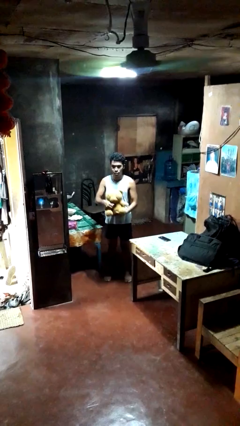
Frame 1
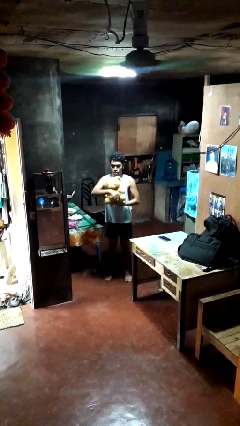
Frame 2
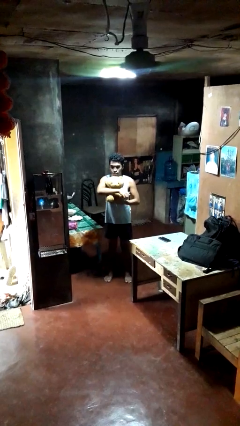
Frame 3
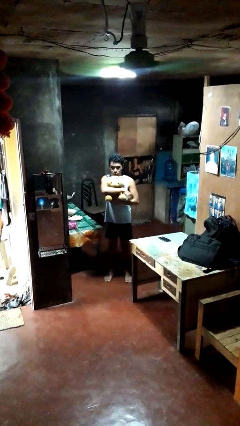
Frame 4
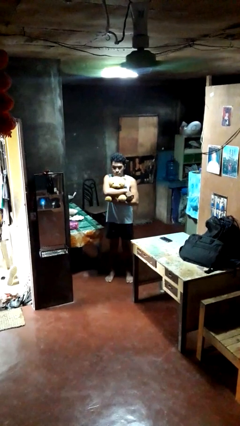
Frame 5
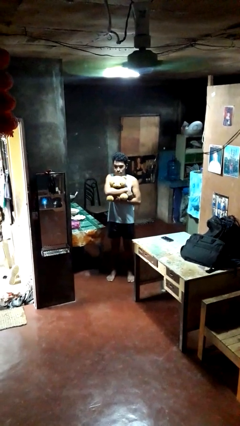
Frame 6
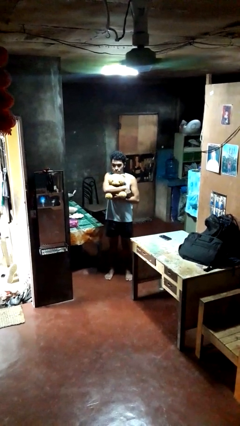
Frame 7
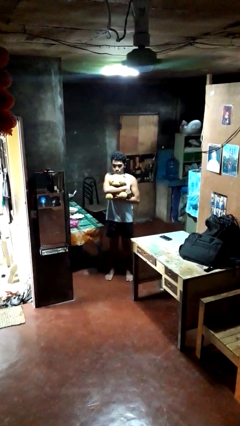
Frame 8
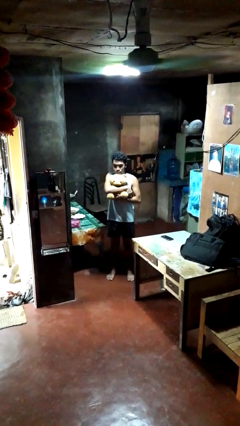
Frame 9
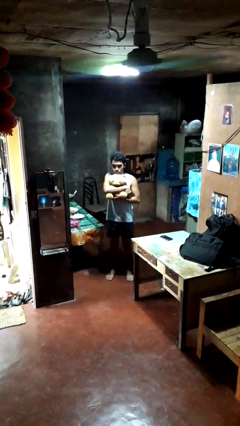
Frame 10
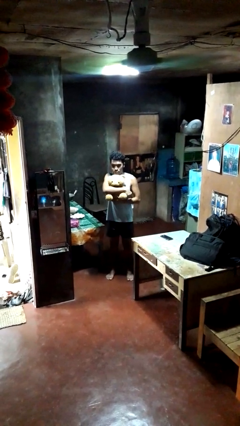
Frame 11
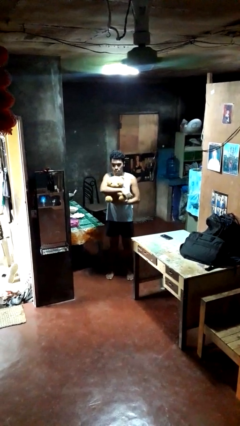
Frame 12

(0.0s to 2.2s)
person hugs stuffed animal

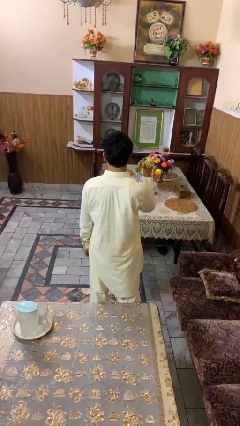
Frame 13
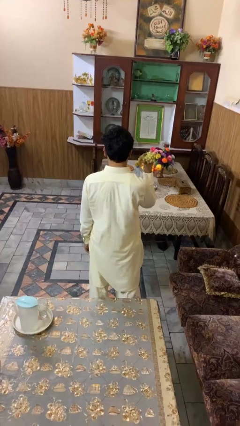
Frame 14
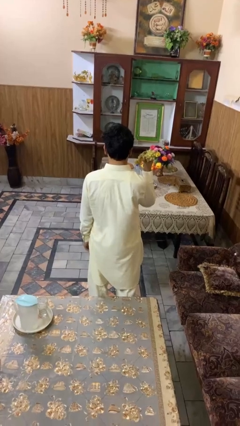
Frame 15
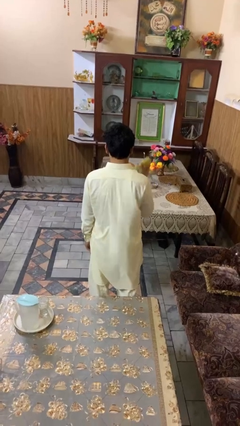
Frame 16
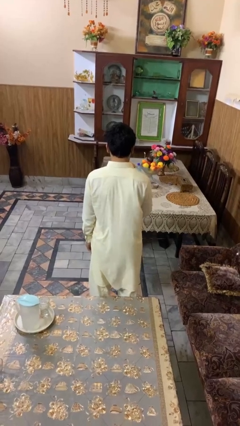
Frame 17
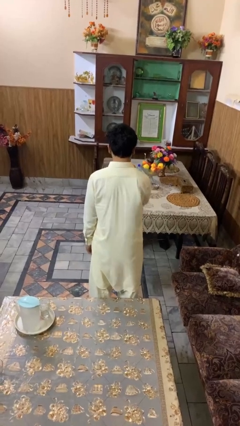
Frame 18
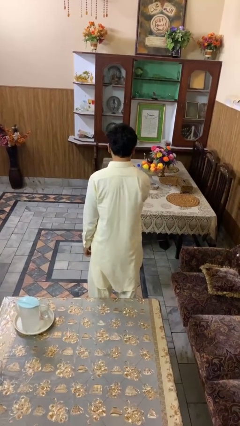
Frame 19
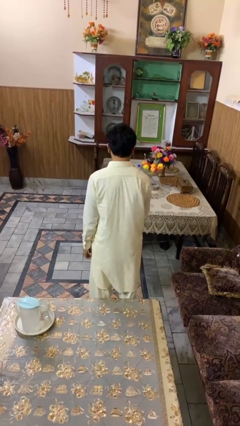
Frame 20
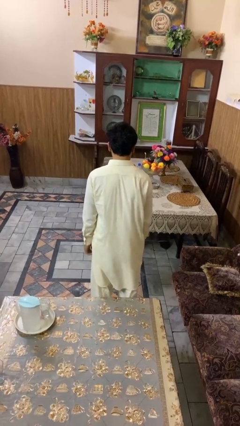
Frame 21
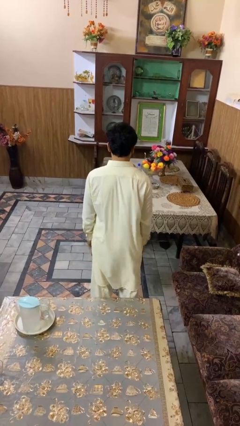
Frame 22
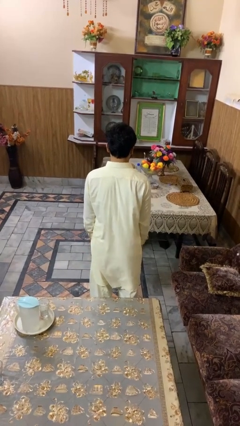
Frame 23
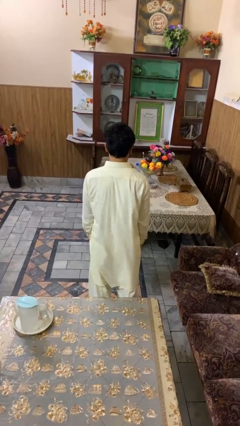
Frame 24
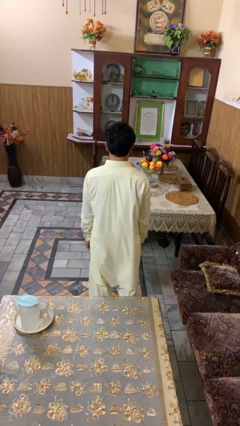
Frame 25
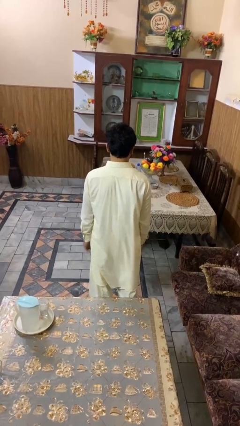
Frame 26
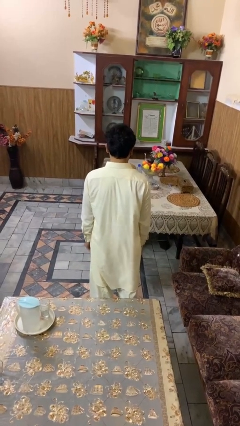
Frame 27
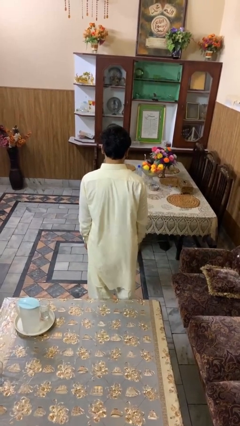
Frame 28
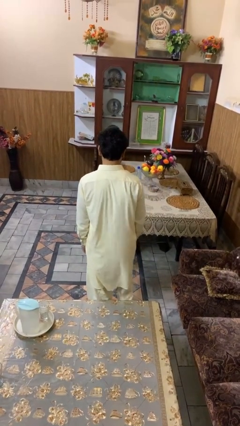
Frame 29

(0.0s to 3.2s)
person throws object on table

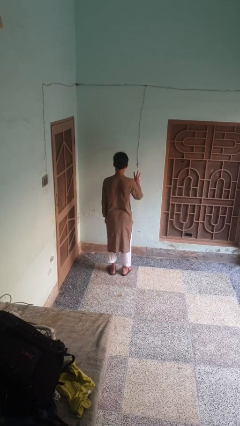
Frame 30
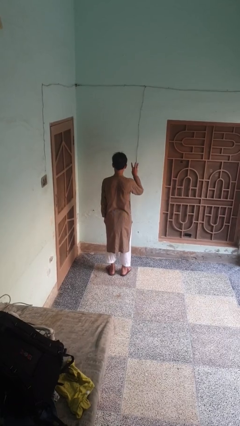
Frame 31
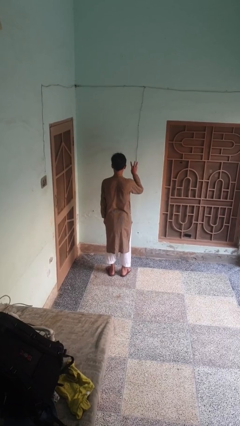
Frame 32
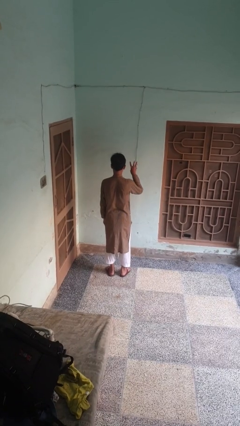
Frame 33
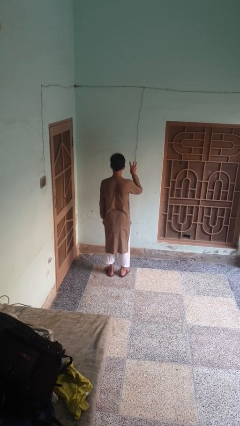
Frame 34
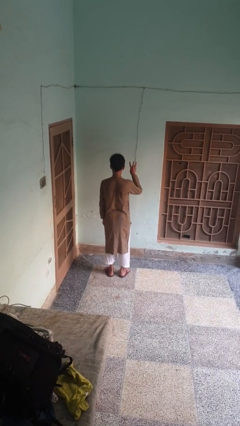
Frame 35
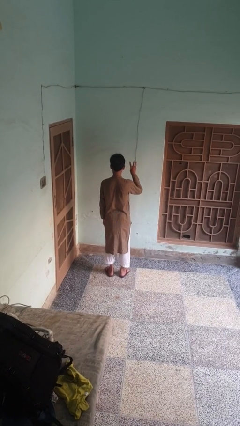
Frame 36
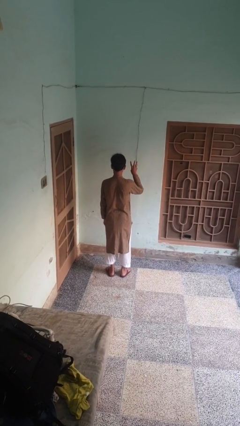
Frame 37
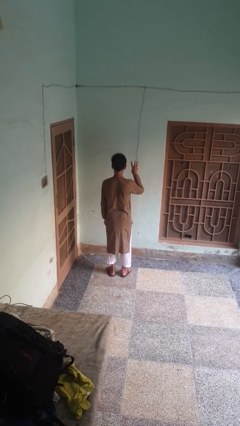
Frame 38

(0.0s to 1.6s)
person gestures number three

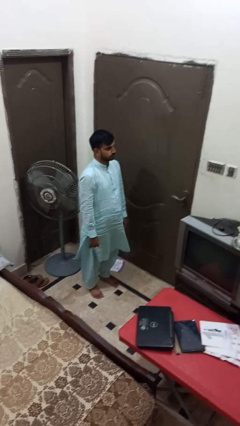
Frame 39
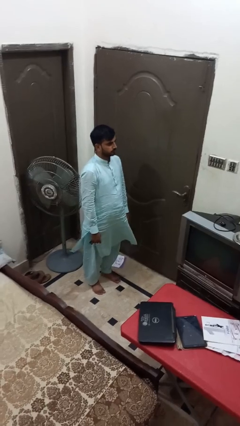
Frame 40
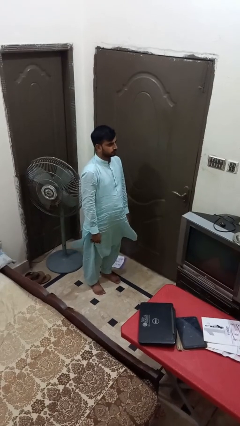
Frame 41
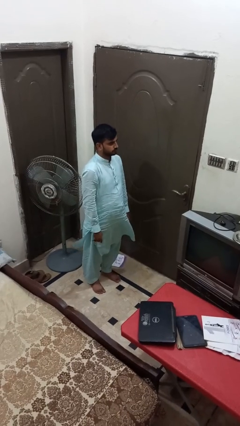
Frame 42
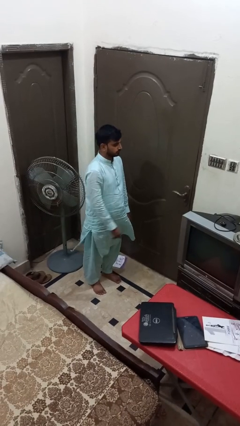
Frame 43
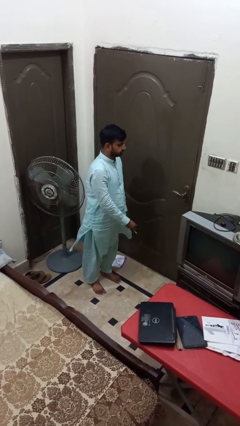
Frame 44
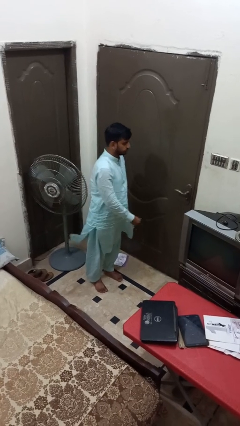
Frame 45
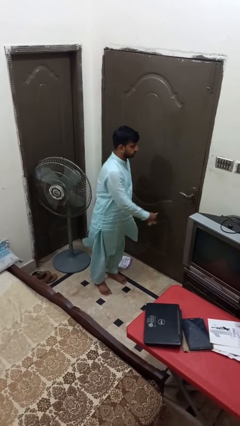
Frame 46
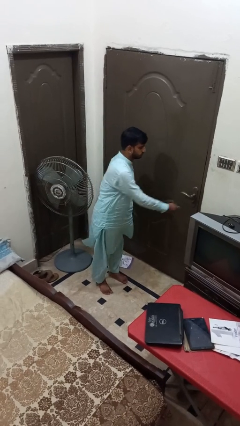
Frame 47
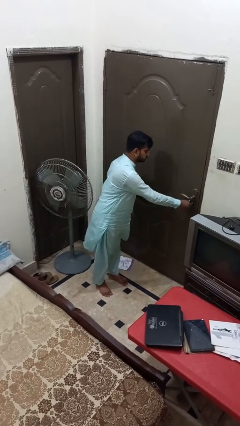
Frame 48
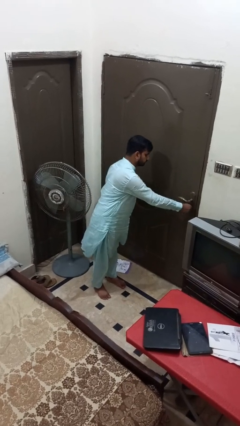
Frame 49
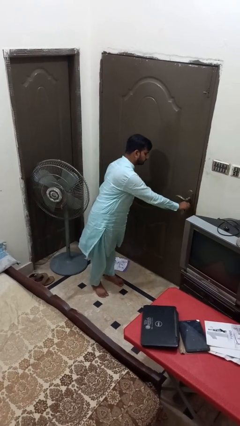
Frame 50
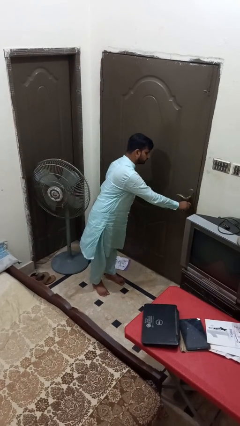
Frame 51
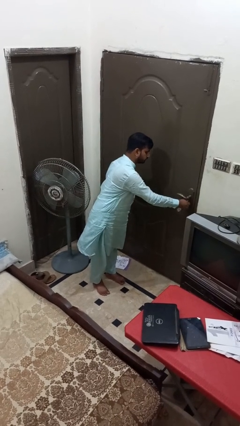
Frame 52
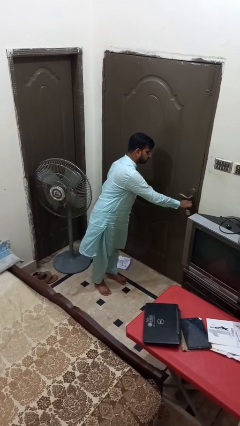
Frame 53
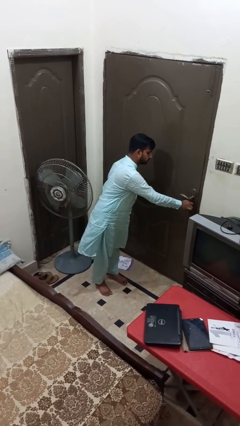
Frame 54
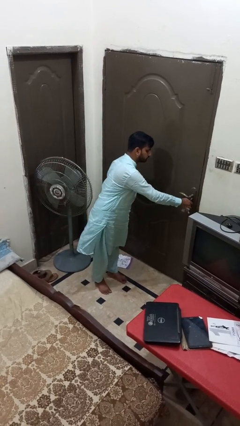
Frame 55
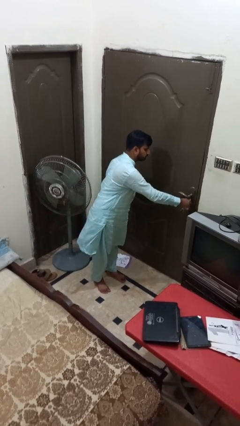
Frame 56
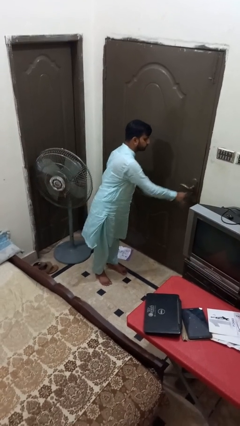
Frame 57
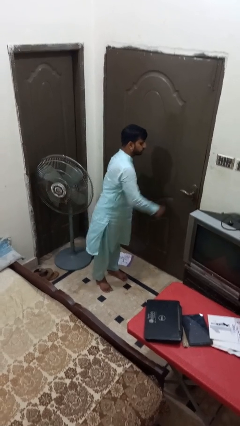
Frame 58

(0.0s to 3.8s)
person unlocks door with keys

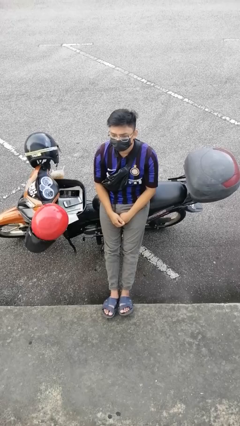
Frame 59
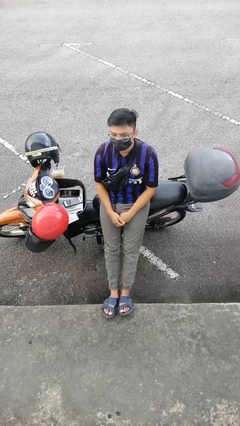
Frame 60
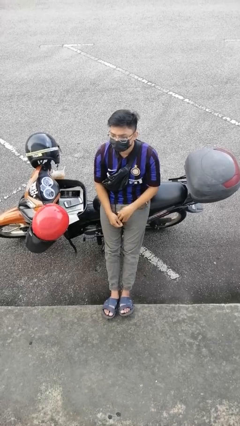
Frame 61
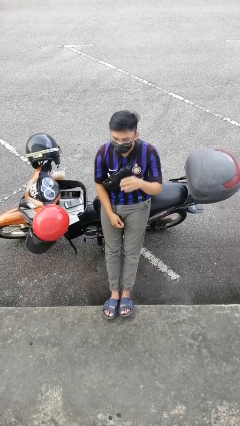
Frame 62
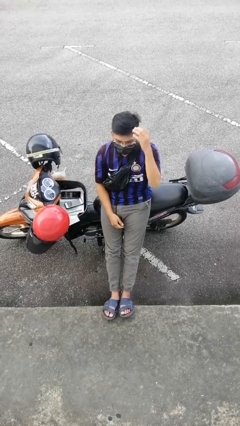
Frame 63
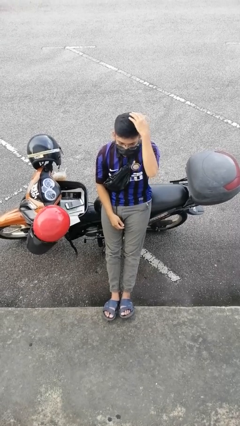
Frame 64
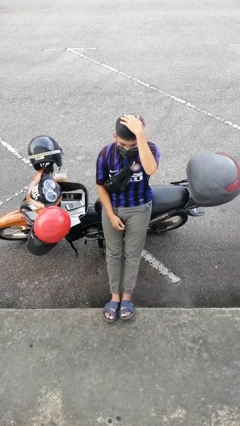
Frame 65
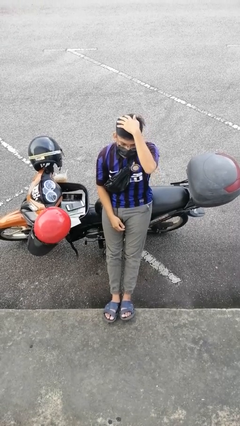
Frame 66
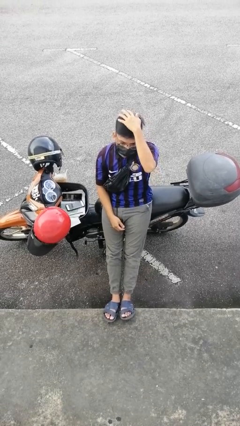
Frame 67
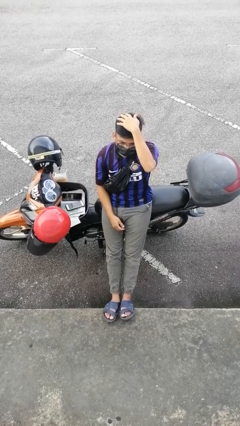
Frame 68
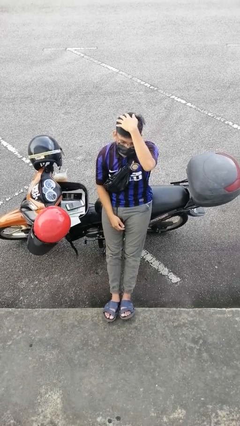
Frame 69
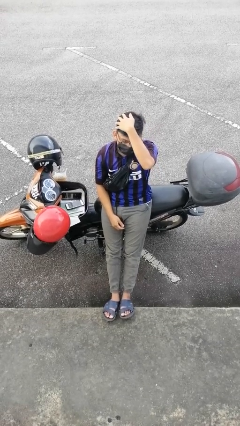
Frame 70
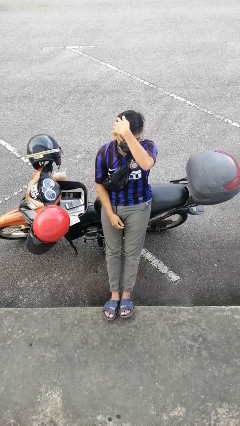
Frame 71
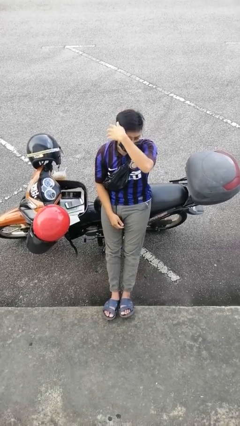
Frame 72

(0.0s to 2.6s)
person pats head

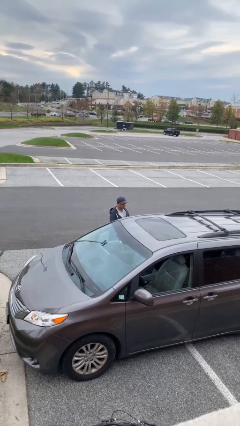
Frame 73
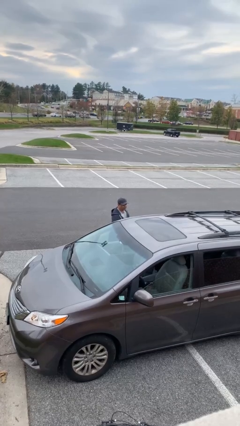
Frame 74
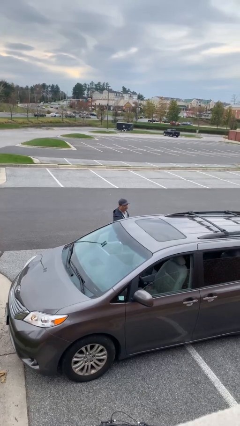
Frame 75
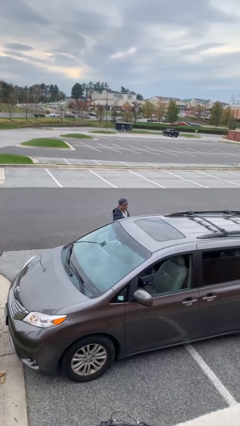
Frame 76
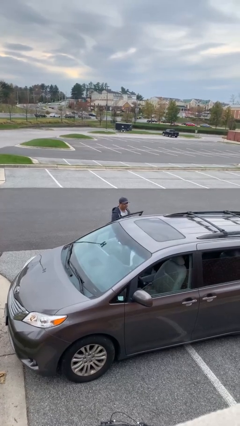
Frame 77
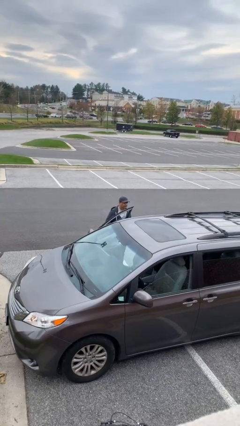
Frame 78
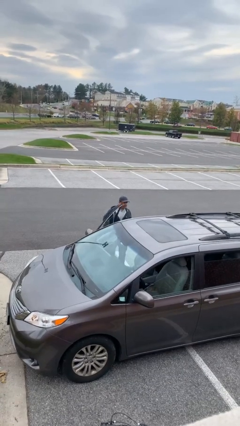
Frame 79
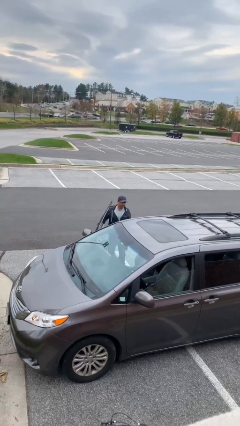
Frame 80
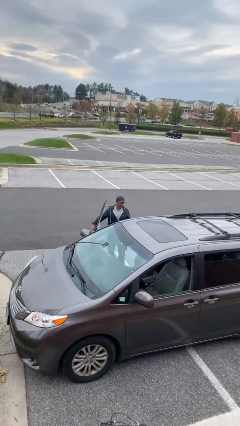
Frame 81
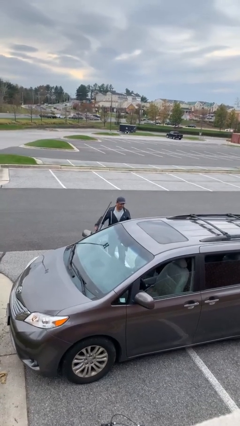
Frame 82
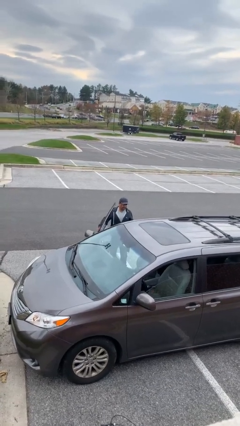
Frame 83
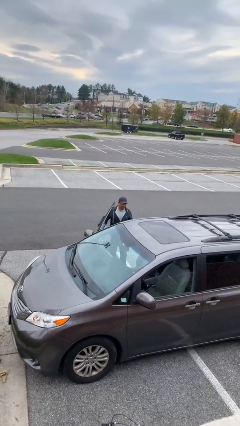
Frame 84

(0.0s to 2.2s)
person opens car door

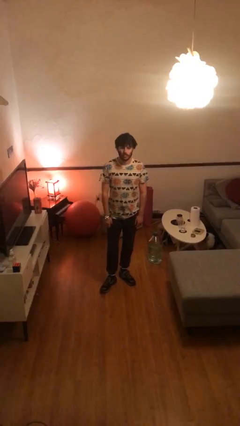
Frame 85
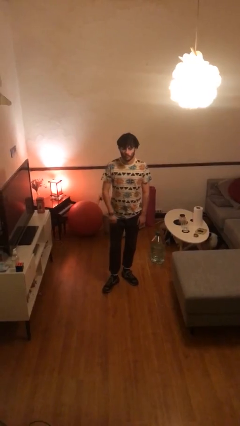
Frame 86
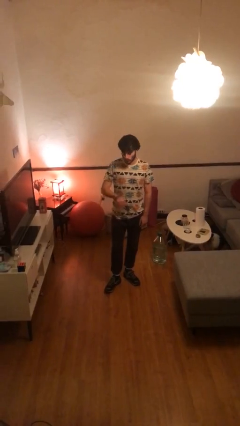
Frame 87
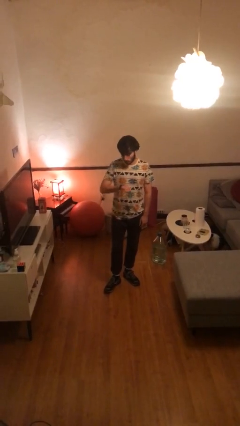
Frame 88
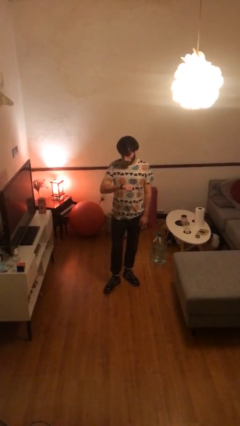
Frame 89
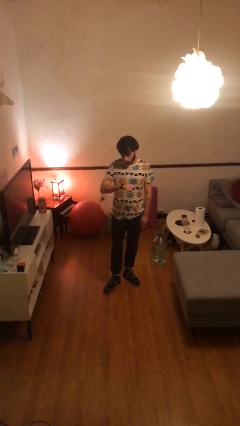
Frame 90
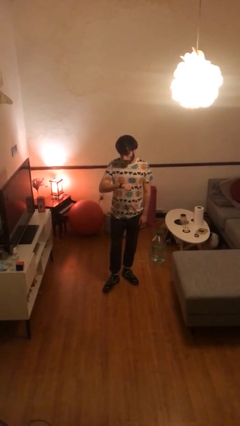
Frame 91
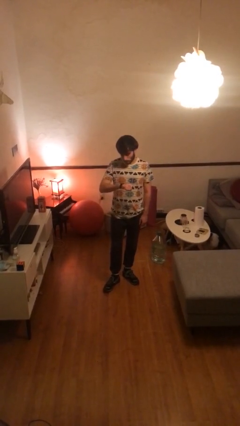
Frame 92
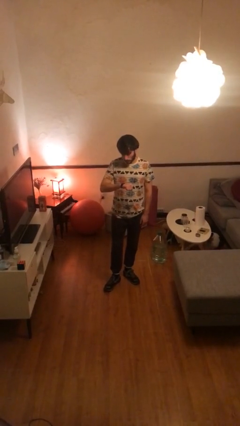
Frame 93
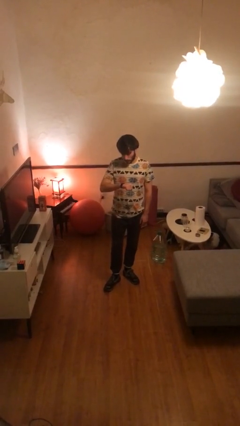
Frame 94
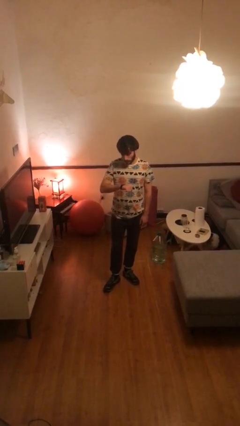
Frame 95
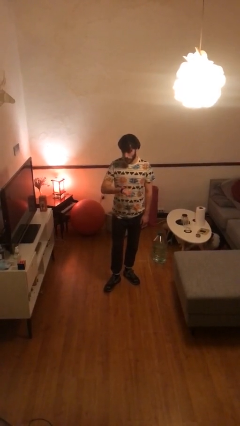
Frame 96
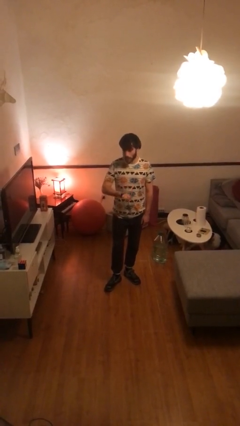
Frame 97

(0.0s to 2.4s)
person looks at wristwatch
